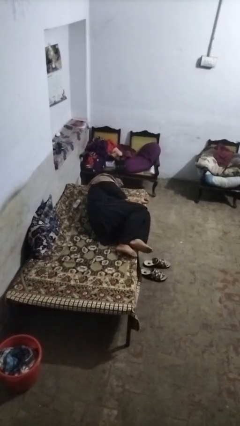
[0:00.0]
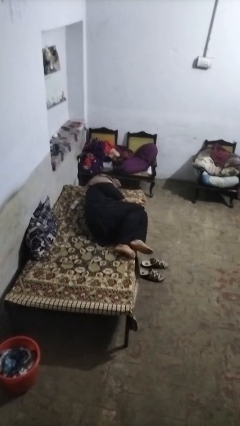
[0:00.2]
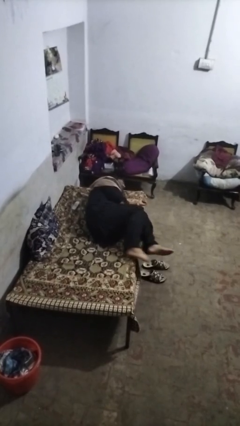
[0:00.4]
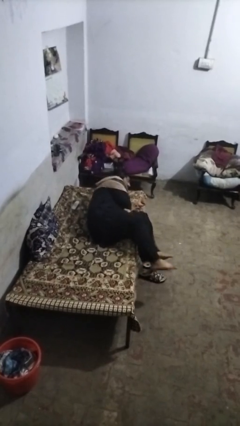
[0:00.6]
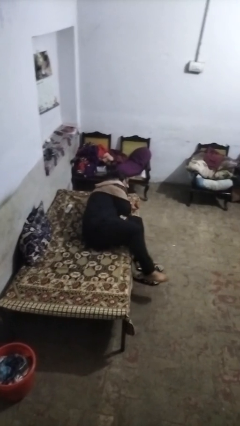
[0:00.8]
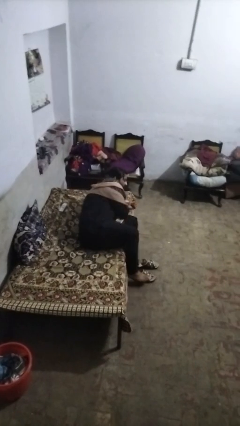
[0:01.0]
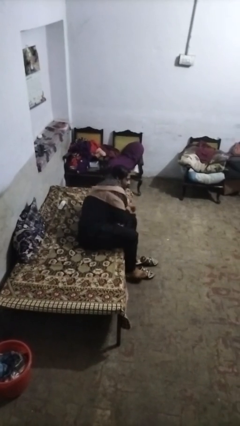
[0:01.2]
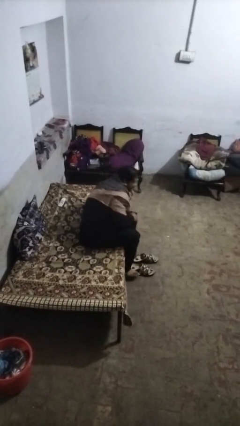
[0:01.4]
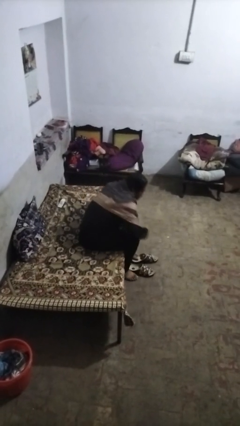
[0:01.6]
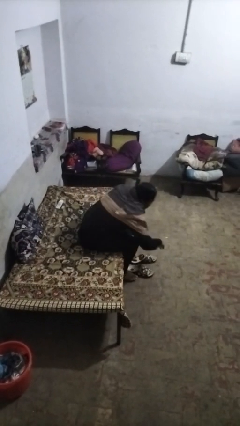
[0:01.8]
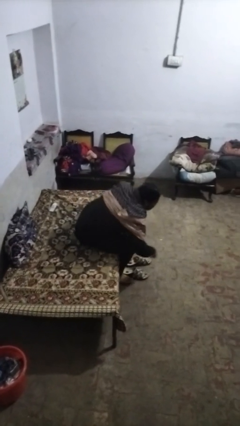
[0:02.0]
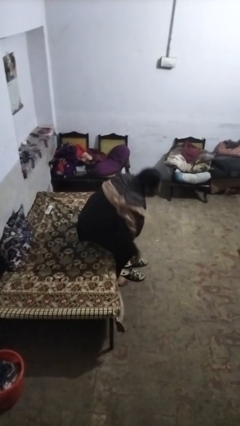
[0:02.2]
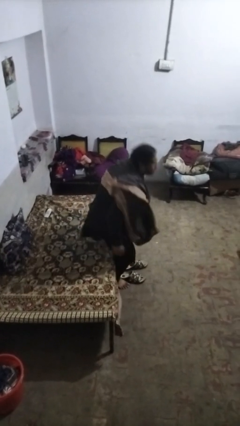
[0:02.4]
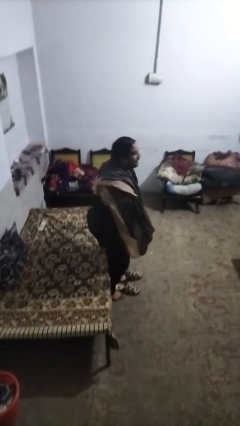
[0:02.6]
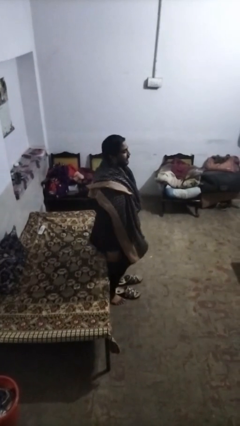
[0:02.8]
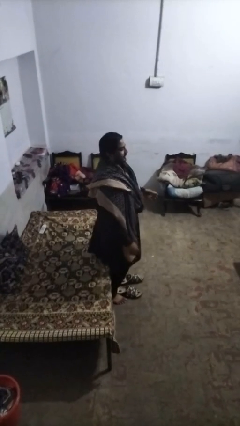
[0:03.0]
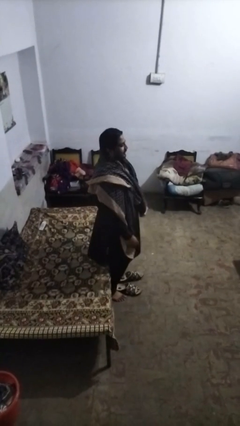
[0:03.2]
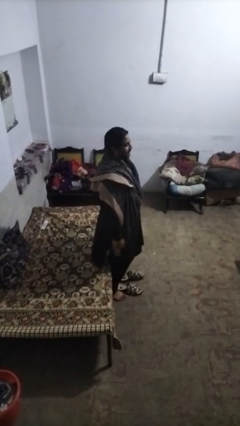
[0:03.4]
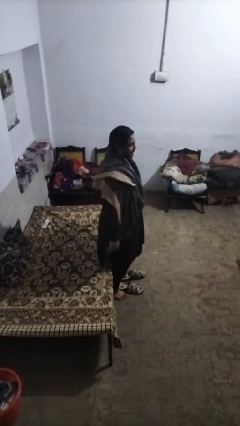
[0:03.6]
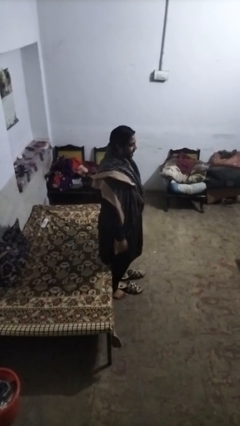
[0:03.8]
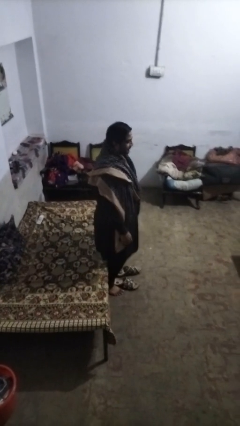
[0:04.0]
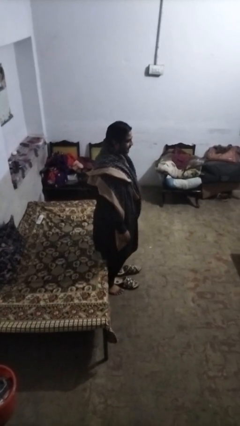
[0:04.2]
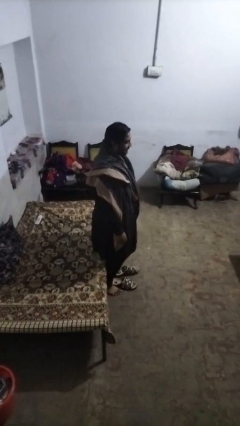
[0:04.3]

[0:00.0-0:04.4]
person stands up

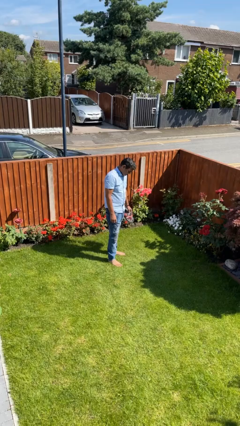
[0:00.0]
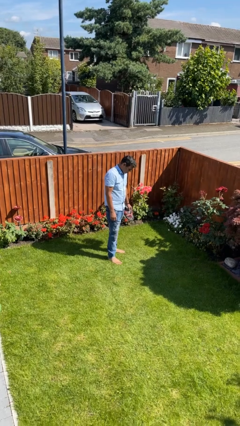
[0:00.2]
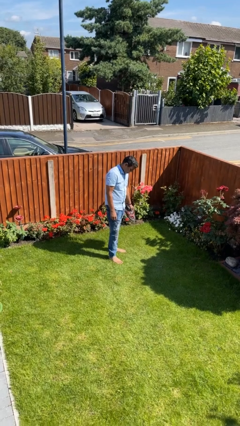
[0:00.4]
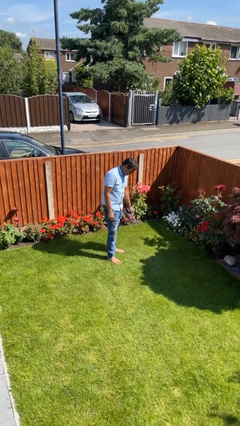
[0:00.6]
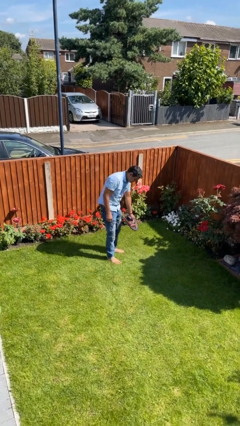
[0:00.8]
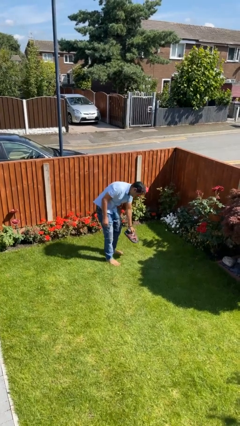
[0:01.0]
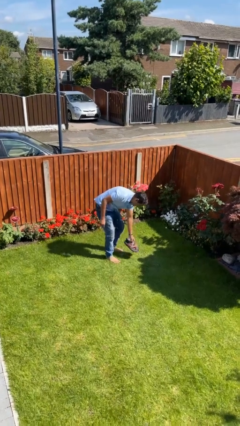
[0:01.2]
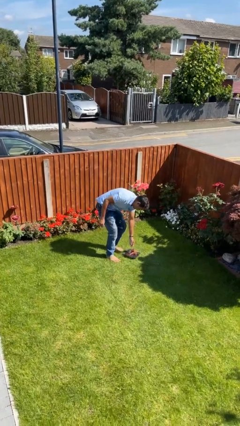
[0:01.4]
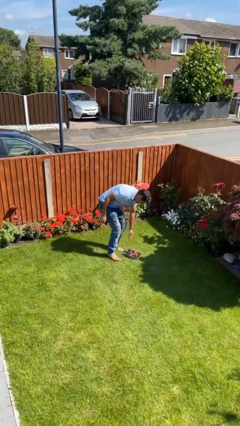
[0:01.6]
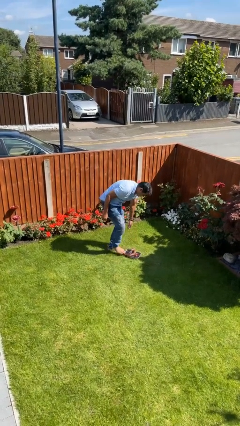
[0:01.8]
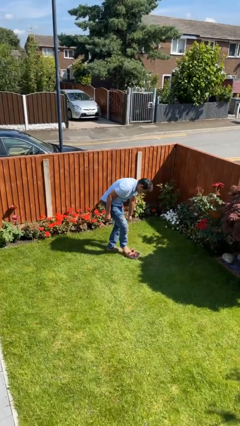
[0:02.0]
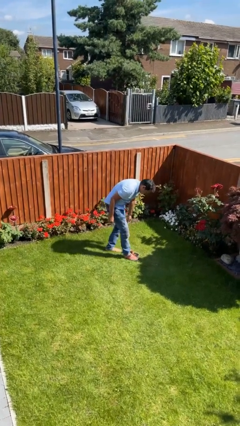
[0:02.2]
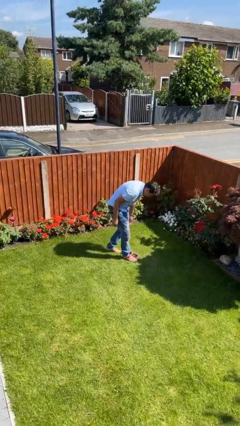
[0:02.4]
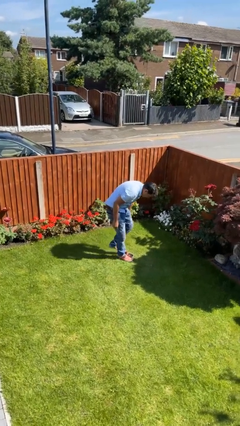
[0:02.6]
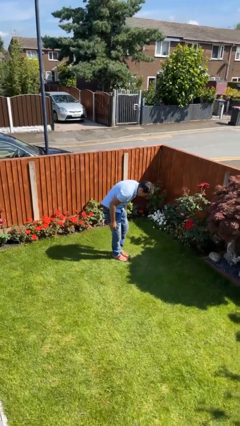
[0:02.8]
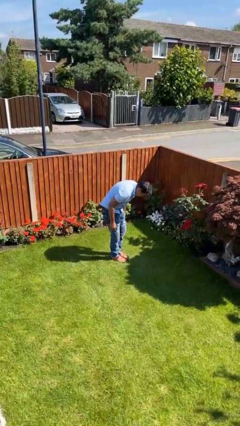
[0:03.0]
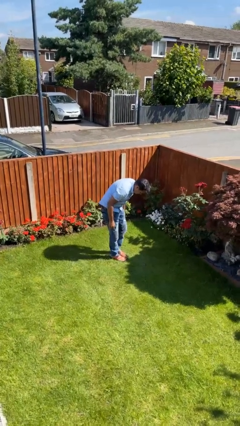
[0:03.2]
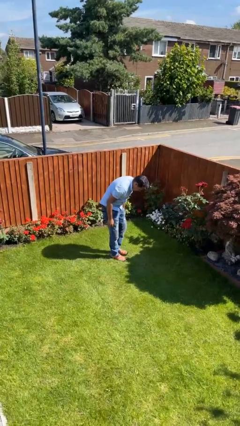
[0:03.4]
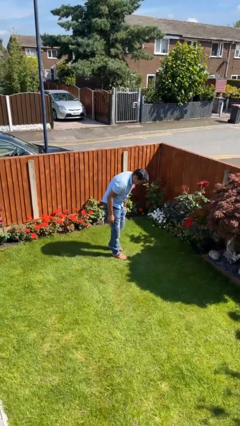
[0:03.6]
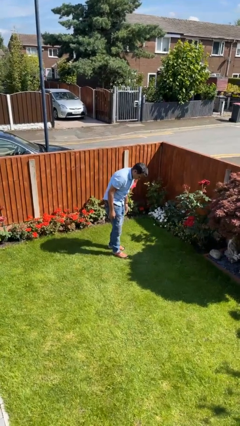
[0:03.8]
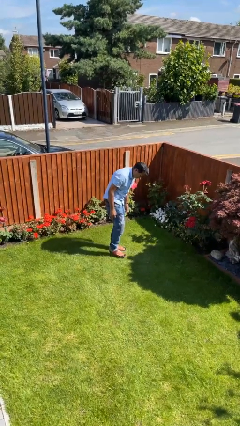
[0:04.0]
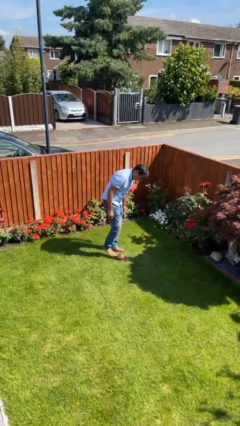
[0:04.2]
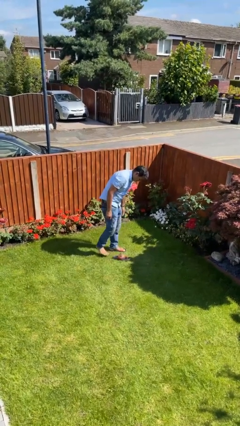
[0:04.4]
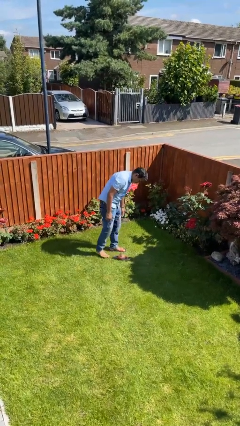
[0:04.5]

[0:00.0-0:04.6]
person puts on shoes

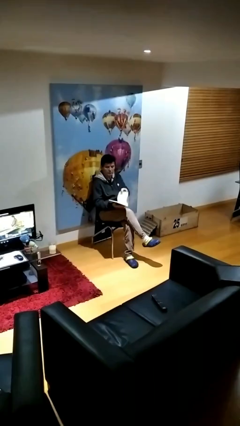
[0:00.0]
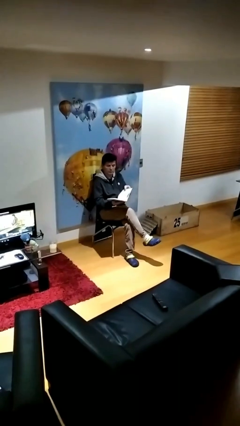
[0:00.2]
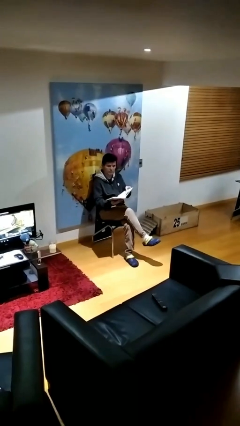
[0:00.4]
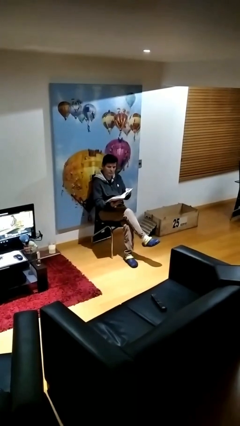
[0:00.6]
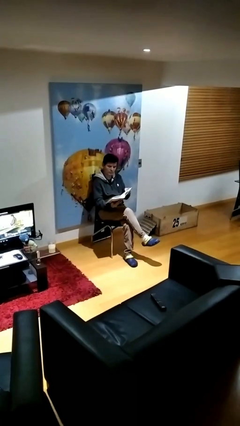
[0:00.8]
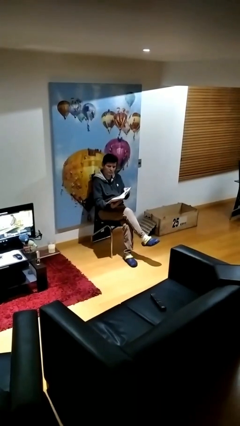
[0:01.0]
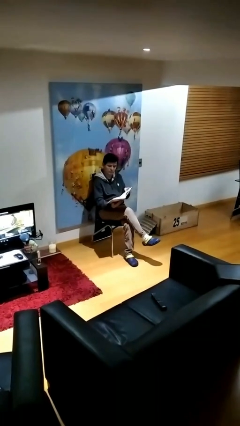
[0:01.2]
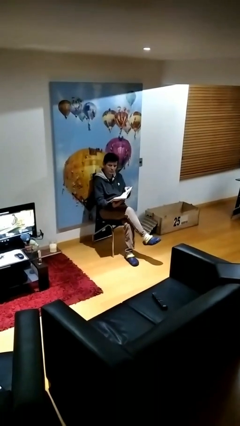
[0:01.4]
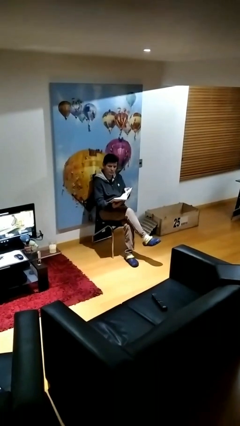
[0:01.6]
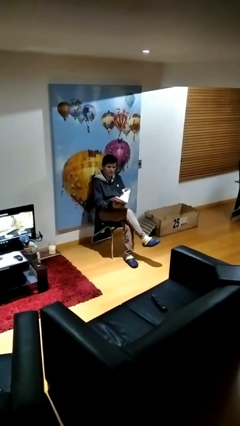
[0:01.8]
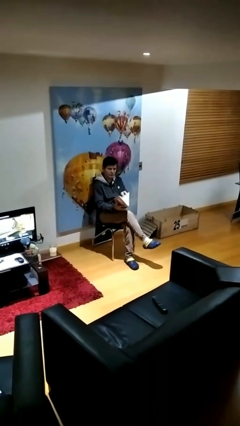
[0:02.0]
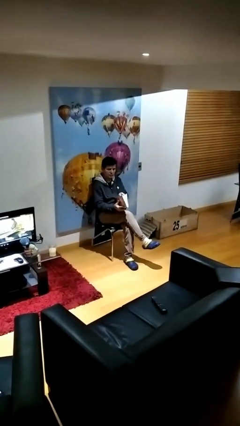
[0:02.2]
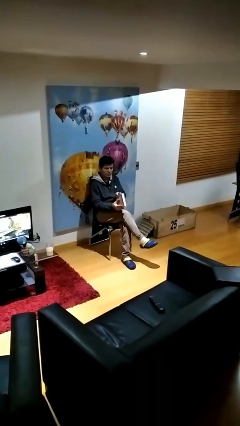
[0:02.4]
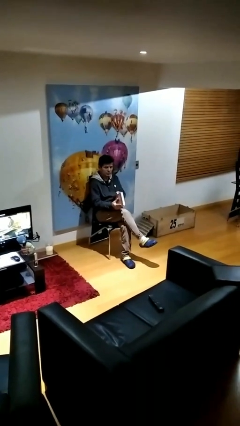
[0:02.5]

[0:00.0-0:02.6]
person reads document

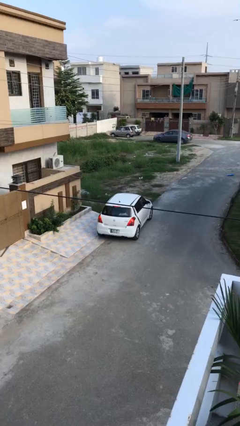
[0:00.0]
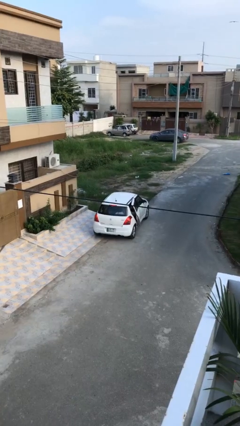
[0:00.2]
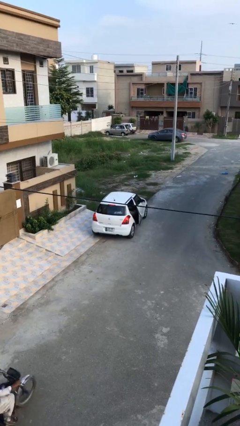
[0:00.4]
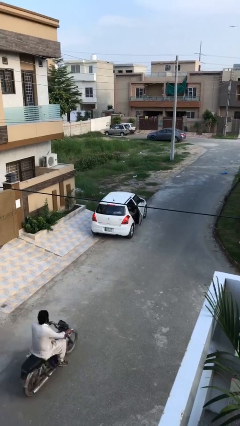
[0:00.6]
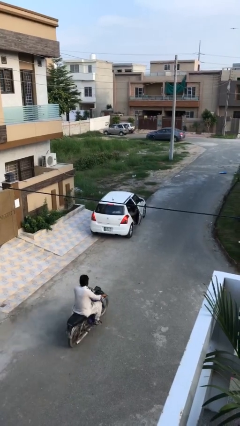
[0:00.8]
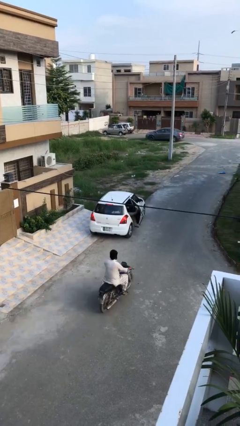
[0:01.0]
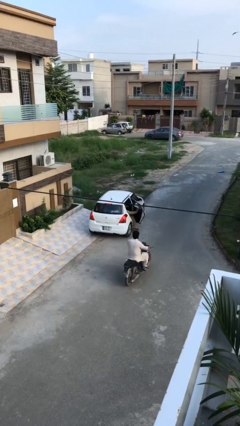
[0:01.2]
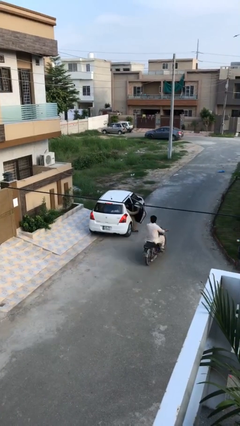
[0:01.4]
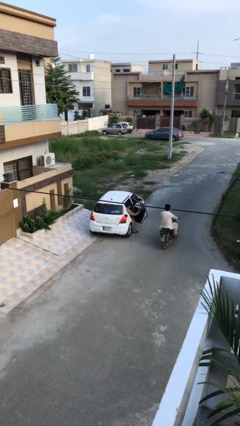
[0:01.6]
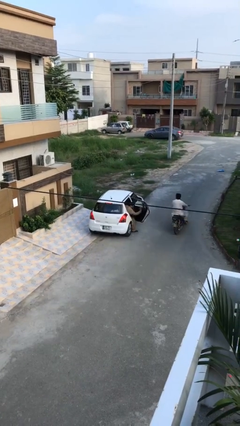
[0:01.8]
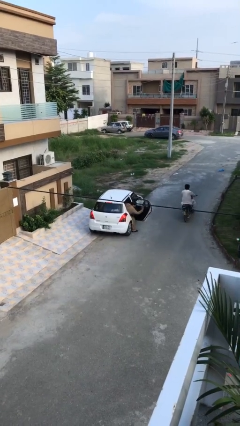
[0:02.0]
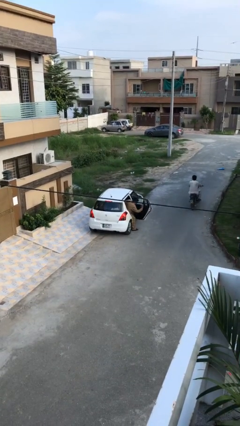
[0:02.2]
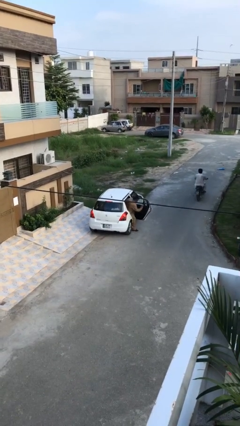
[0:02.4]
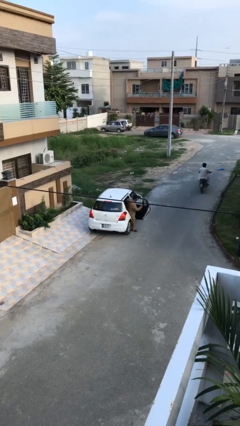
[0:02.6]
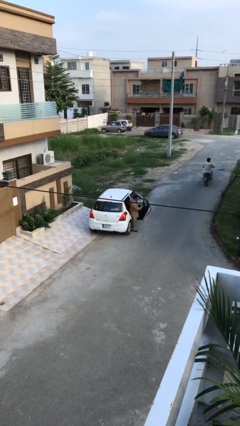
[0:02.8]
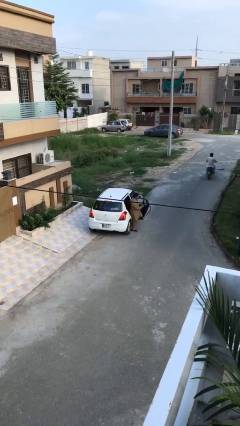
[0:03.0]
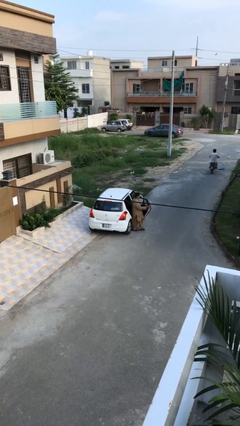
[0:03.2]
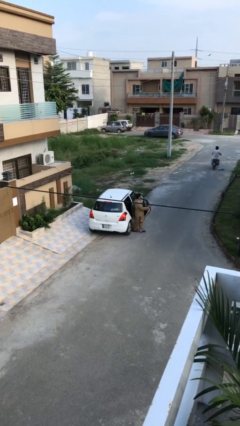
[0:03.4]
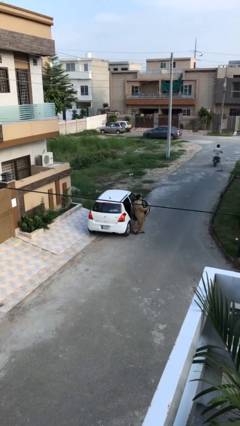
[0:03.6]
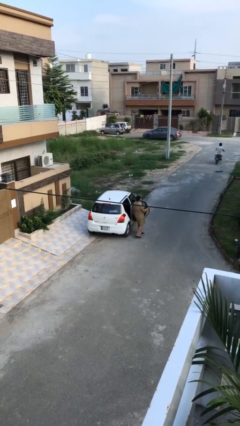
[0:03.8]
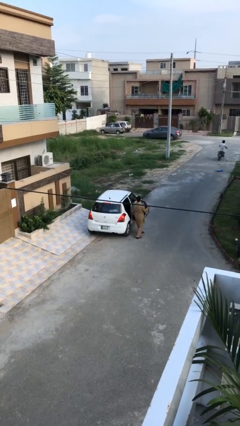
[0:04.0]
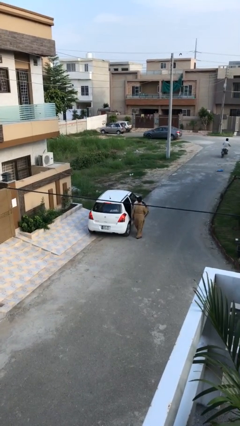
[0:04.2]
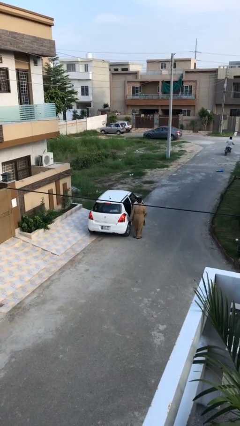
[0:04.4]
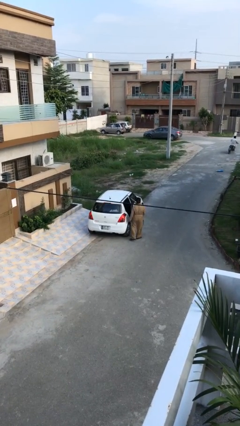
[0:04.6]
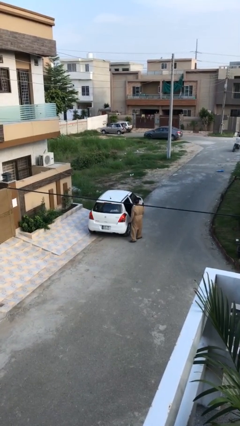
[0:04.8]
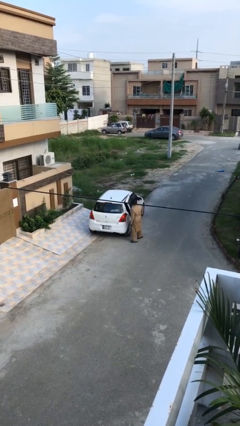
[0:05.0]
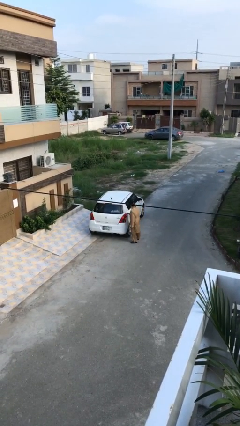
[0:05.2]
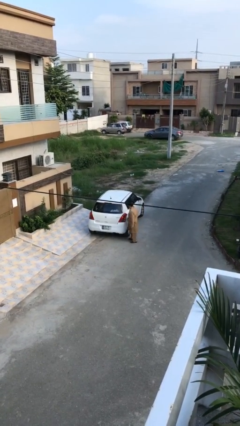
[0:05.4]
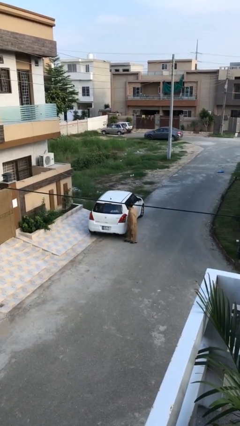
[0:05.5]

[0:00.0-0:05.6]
car drops off person

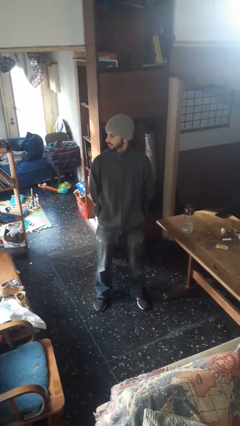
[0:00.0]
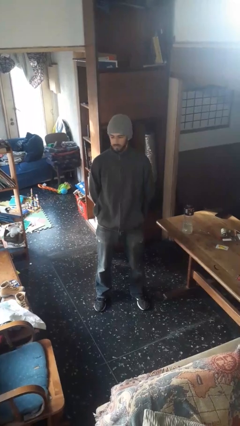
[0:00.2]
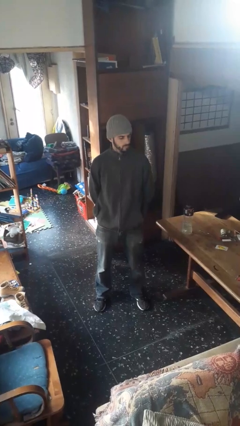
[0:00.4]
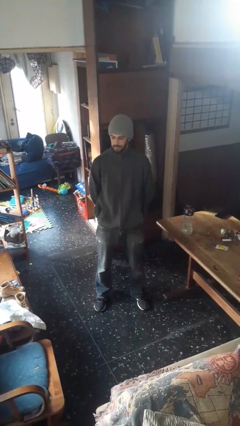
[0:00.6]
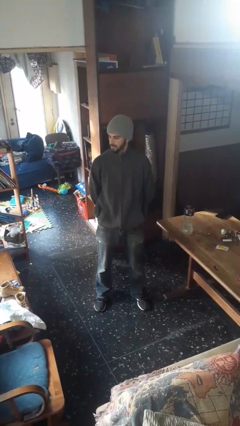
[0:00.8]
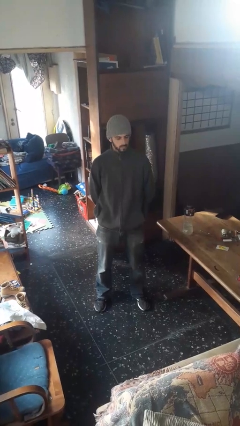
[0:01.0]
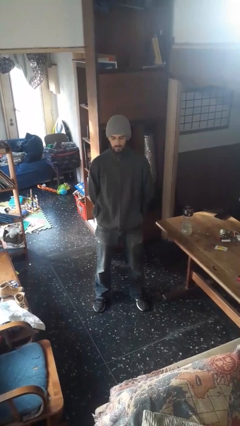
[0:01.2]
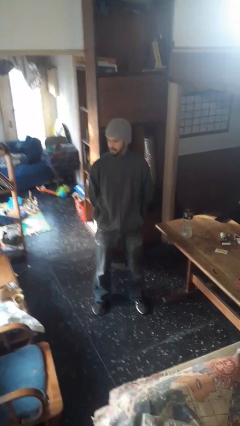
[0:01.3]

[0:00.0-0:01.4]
person shakes head
